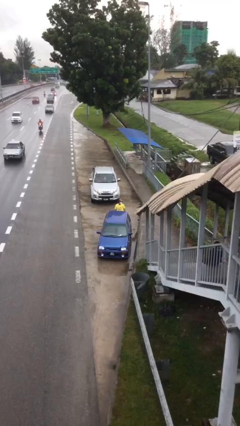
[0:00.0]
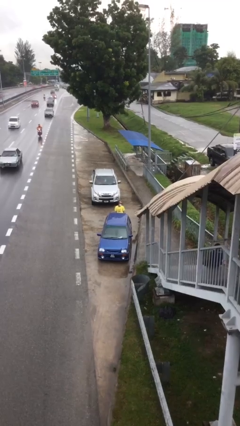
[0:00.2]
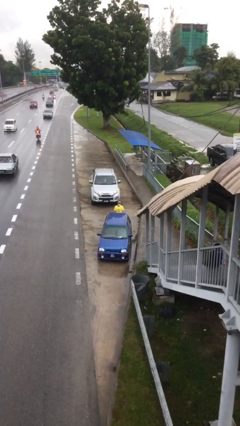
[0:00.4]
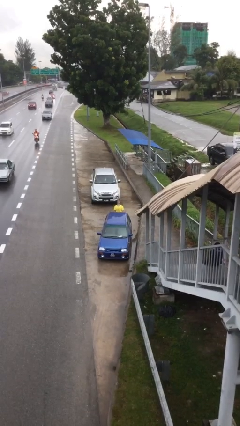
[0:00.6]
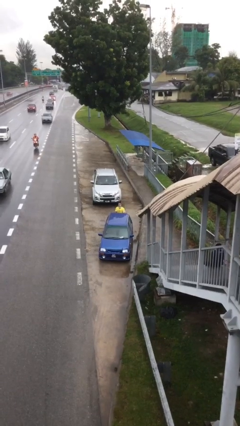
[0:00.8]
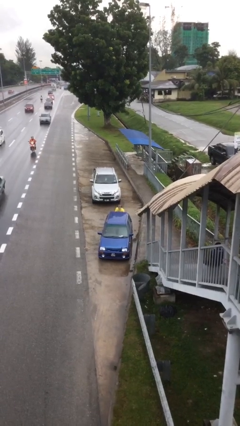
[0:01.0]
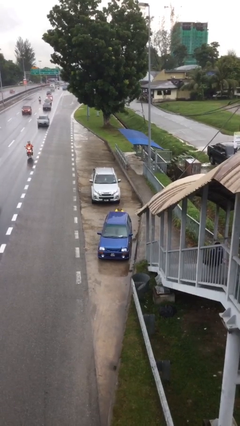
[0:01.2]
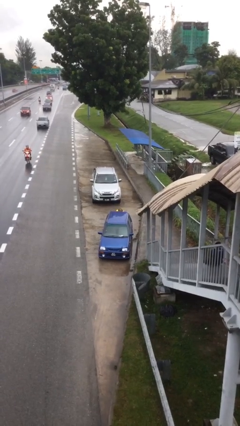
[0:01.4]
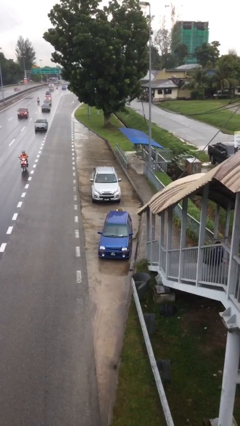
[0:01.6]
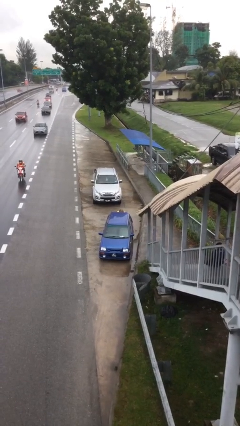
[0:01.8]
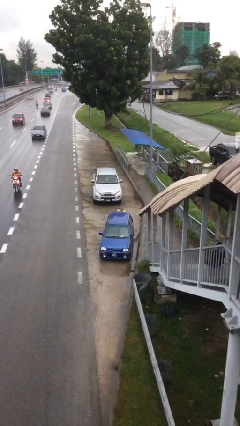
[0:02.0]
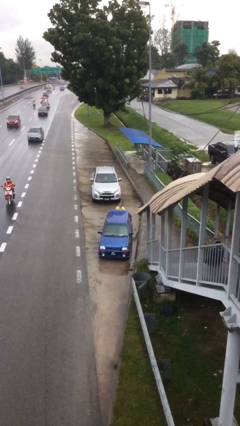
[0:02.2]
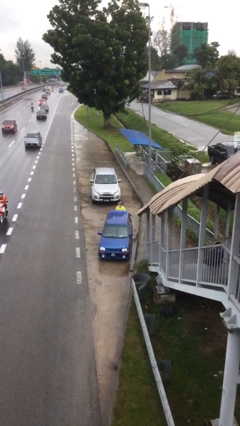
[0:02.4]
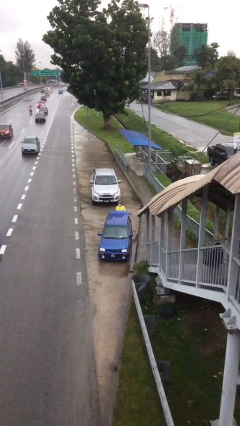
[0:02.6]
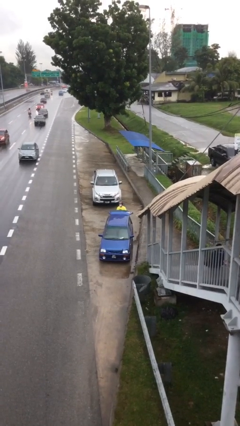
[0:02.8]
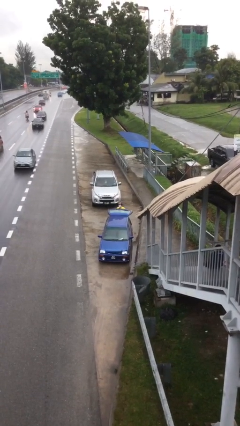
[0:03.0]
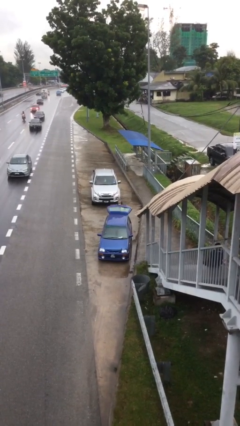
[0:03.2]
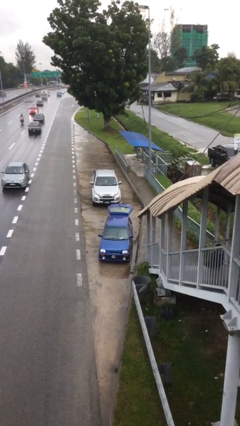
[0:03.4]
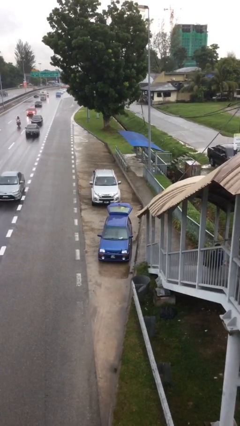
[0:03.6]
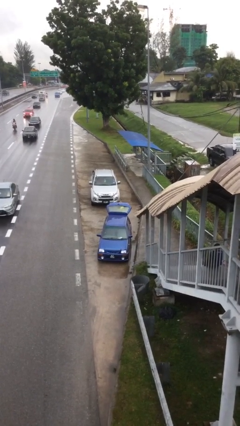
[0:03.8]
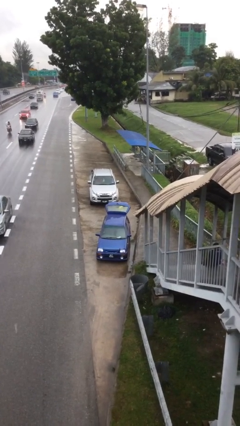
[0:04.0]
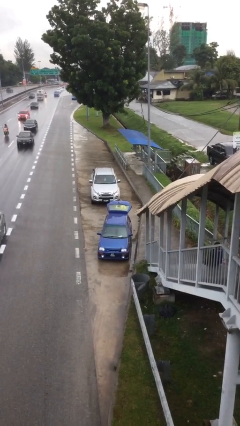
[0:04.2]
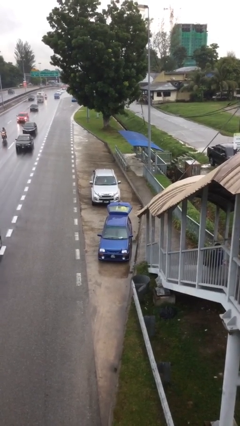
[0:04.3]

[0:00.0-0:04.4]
person opens car trunk

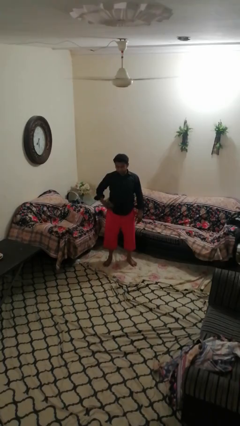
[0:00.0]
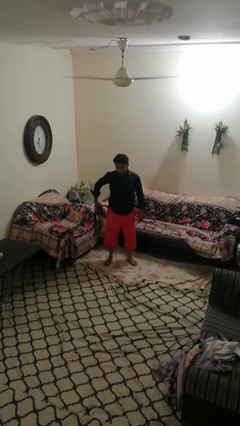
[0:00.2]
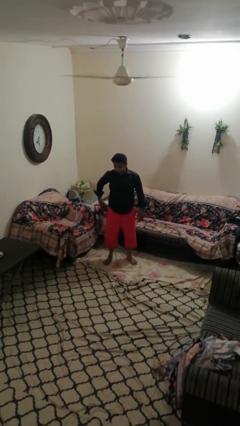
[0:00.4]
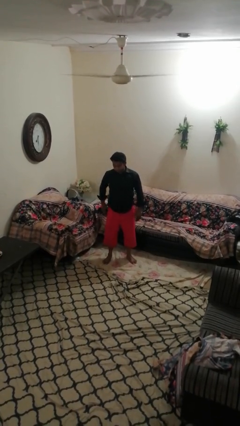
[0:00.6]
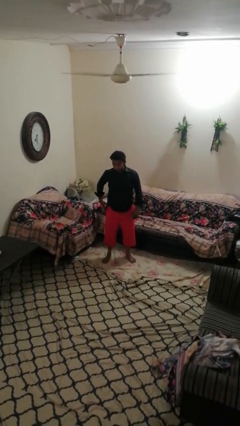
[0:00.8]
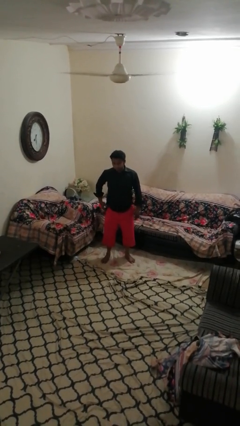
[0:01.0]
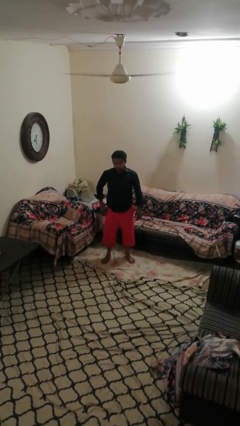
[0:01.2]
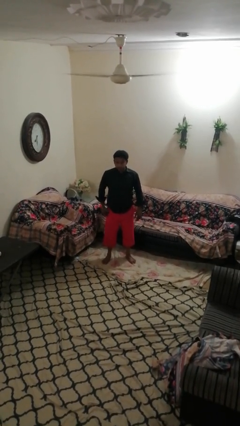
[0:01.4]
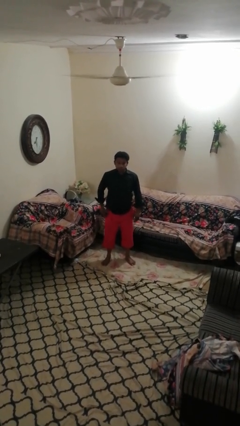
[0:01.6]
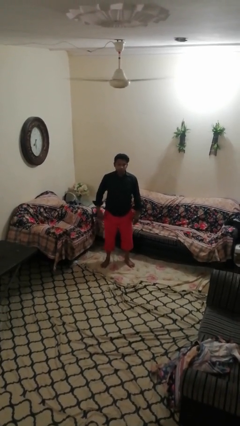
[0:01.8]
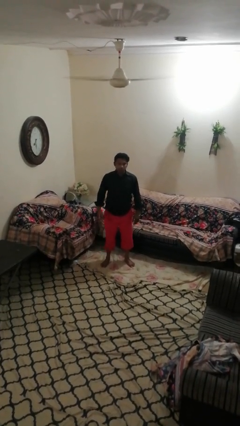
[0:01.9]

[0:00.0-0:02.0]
person puts phone into pocket

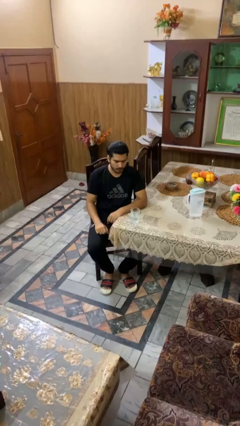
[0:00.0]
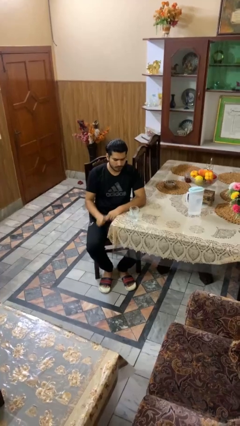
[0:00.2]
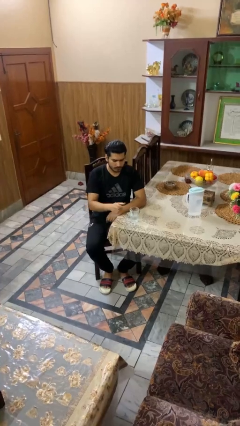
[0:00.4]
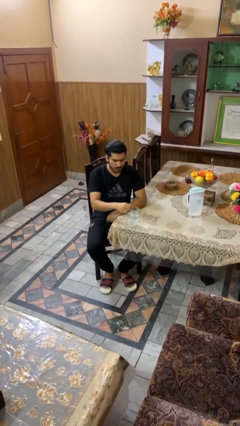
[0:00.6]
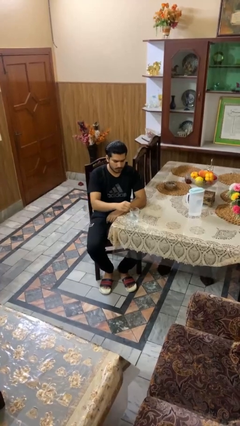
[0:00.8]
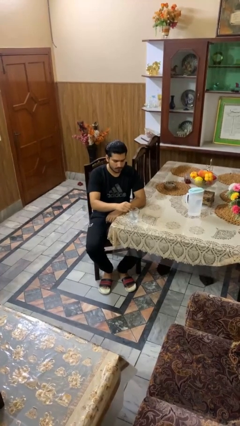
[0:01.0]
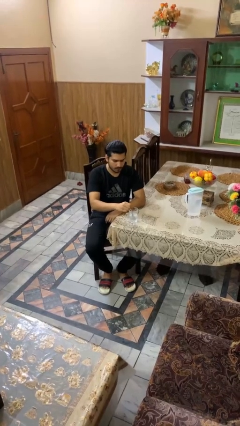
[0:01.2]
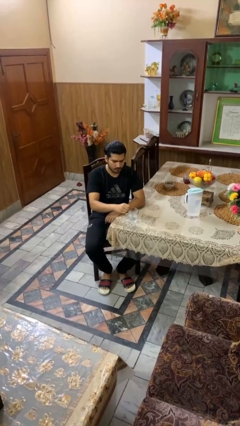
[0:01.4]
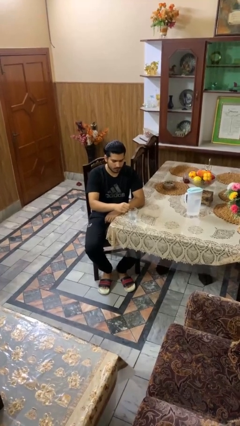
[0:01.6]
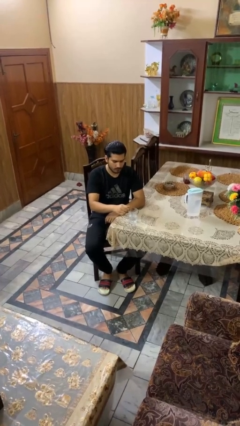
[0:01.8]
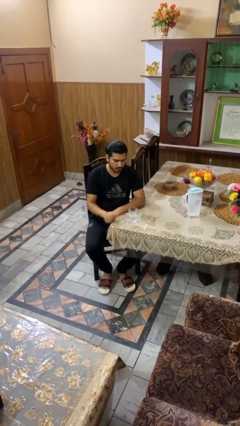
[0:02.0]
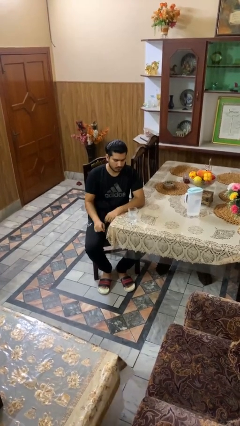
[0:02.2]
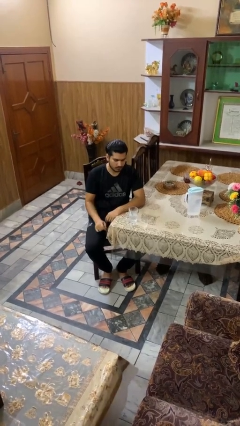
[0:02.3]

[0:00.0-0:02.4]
person stirs mug

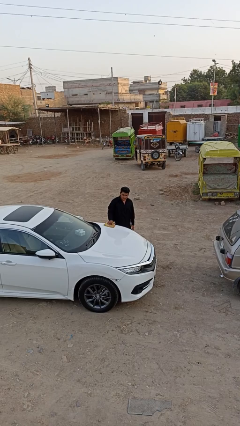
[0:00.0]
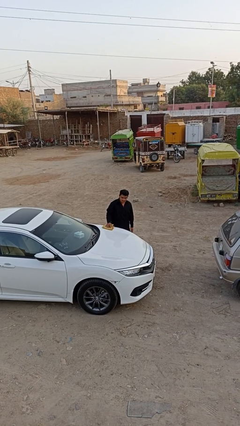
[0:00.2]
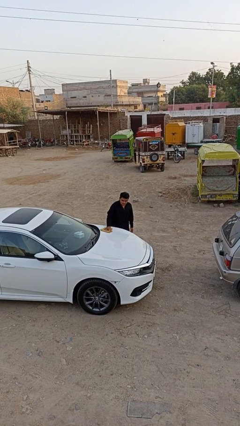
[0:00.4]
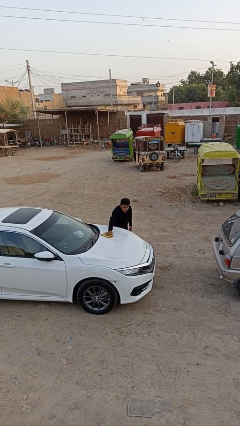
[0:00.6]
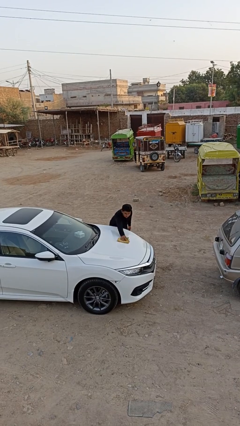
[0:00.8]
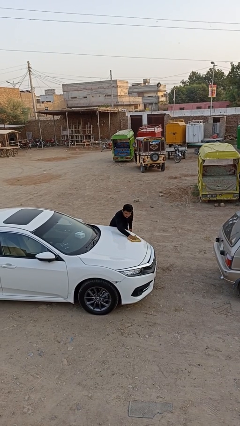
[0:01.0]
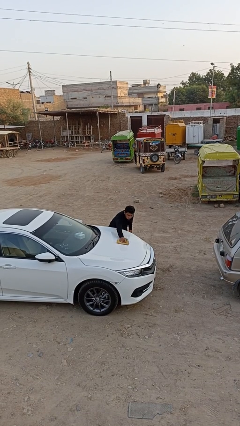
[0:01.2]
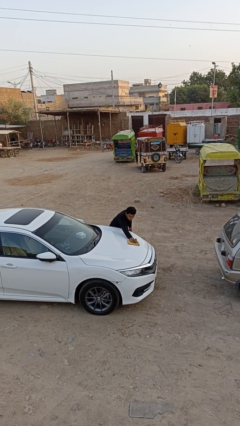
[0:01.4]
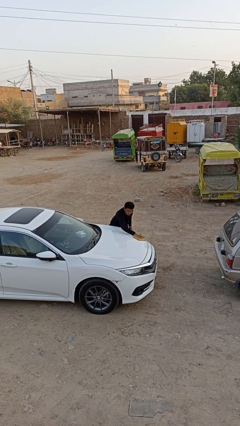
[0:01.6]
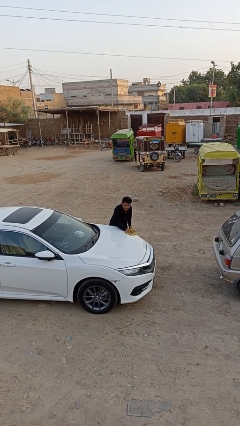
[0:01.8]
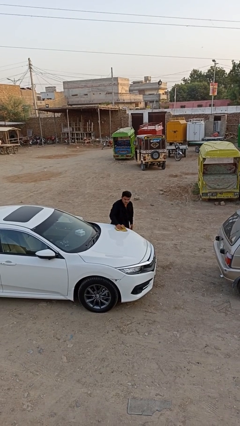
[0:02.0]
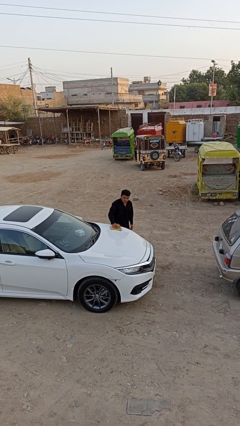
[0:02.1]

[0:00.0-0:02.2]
person polishes car with rag

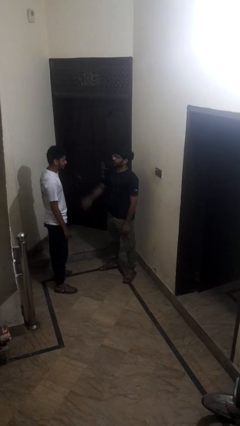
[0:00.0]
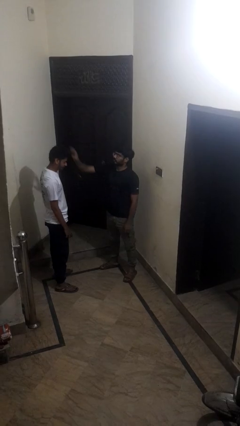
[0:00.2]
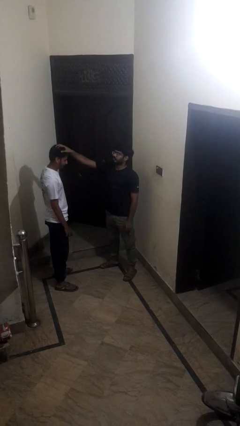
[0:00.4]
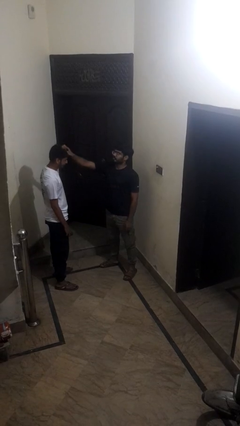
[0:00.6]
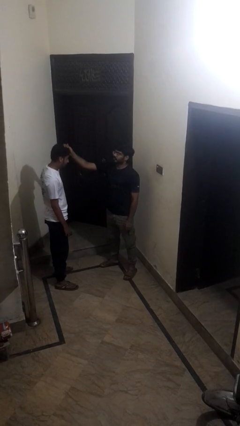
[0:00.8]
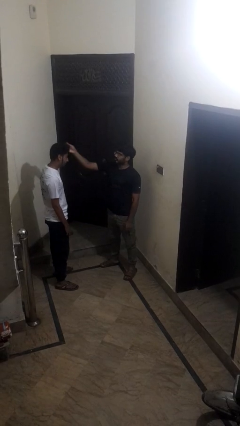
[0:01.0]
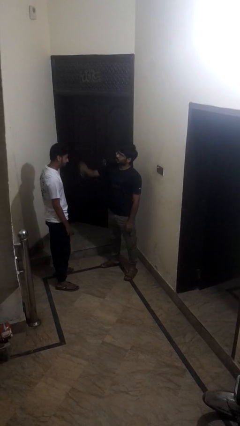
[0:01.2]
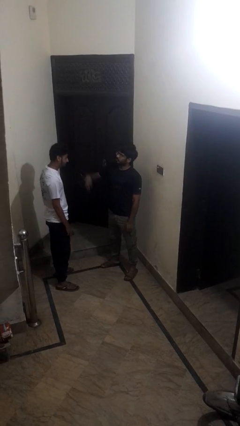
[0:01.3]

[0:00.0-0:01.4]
person grabs person by hair

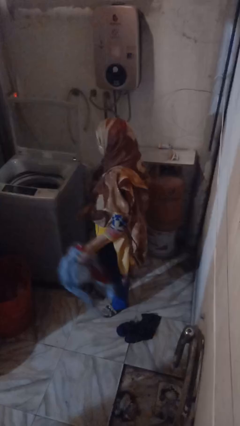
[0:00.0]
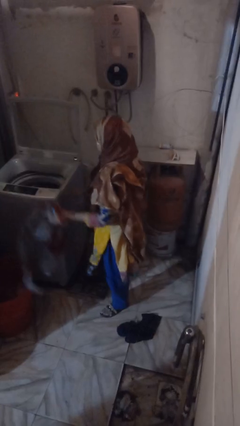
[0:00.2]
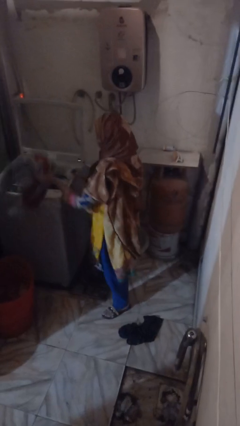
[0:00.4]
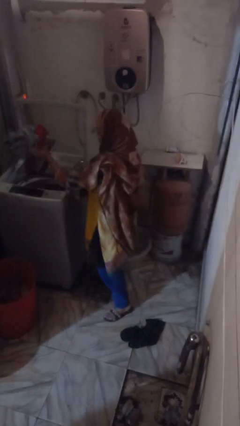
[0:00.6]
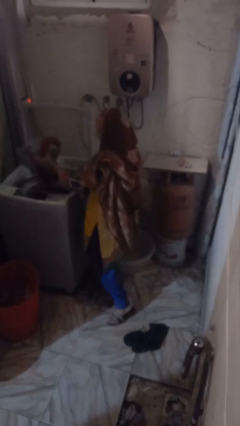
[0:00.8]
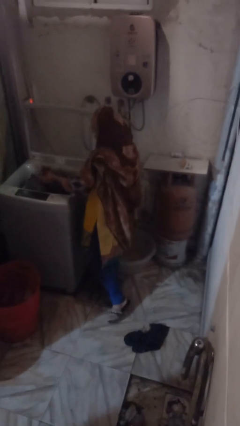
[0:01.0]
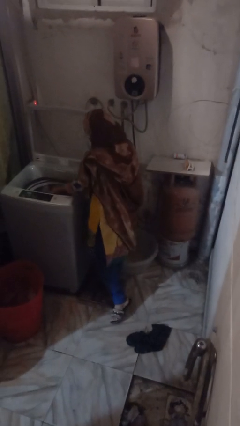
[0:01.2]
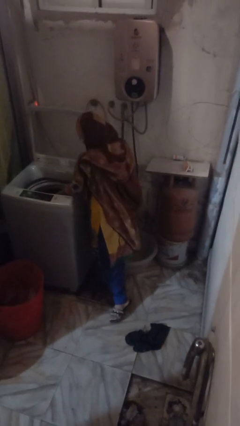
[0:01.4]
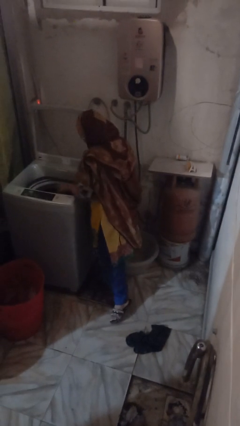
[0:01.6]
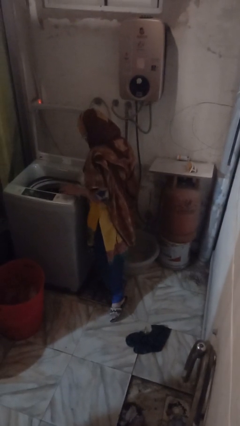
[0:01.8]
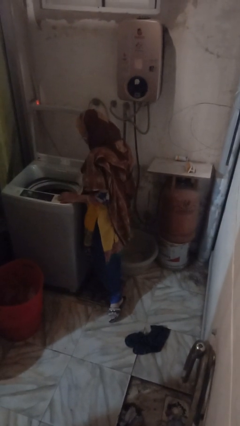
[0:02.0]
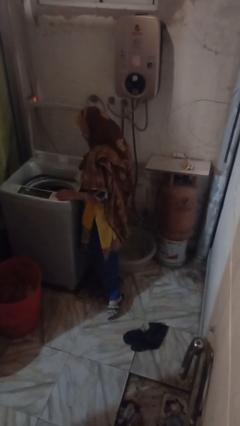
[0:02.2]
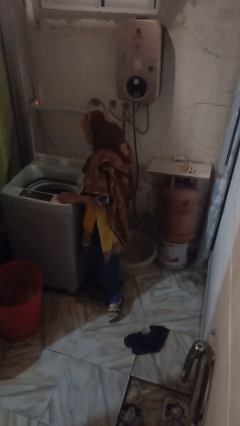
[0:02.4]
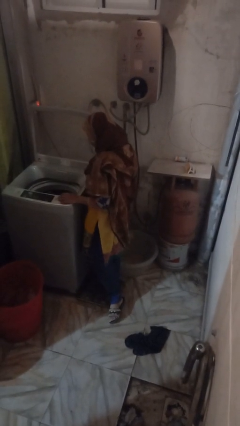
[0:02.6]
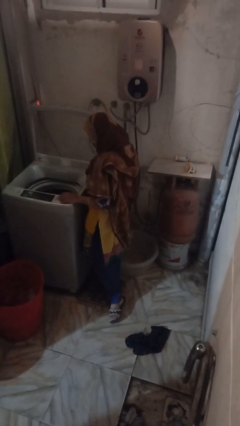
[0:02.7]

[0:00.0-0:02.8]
person loads clotheswasher

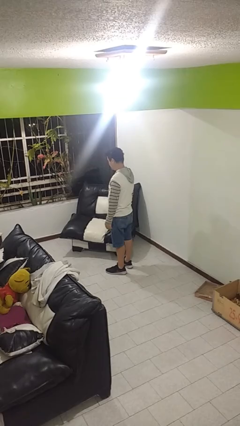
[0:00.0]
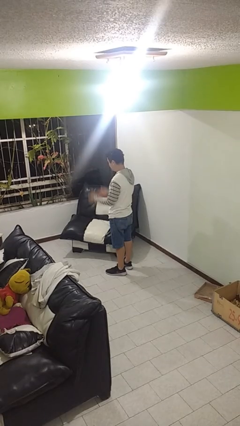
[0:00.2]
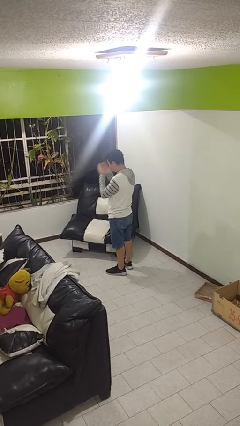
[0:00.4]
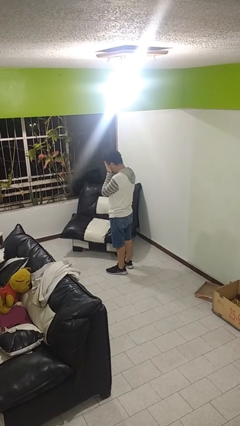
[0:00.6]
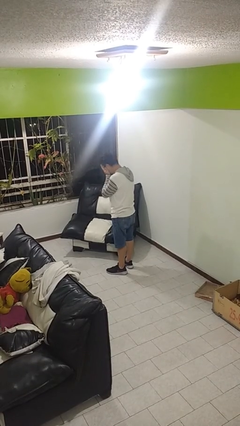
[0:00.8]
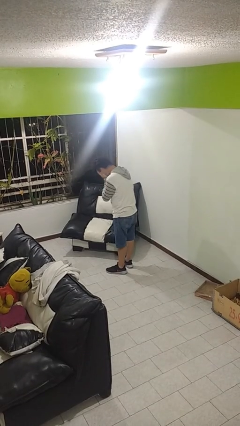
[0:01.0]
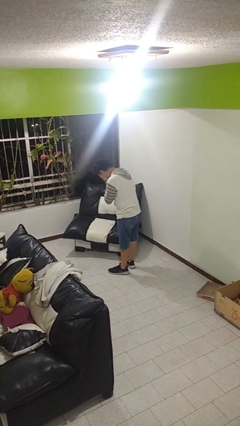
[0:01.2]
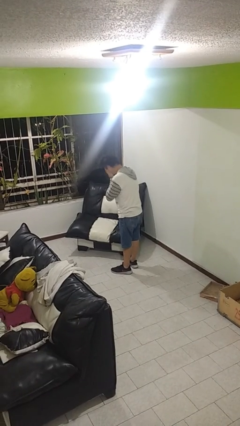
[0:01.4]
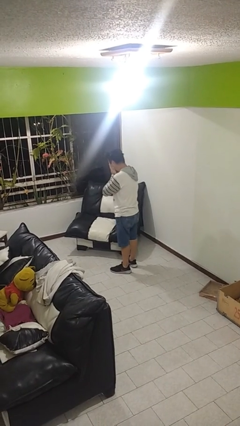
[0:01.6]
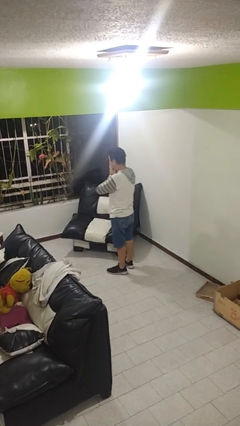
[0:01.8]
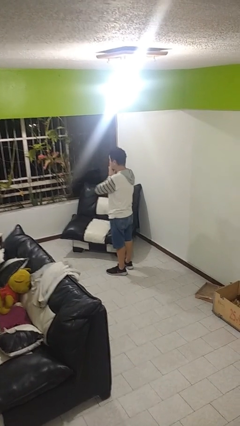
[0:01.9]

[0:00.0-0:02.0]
person covers face with hands
